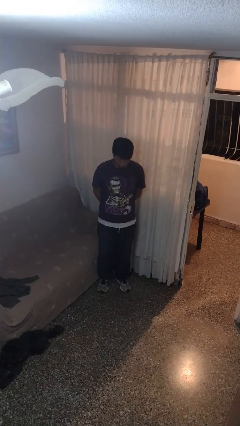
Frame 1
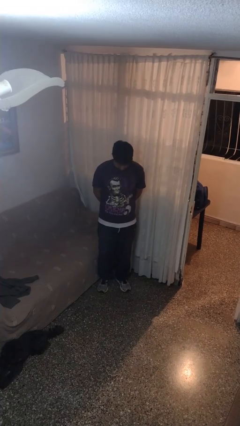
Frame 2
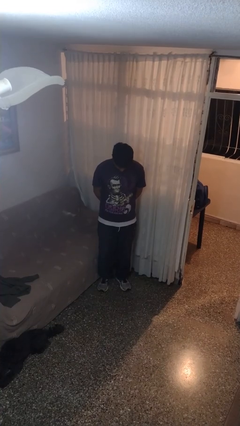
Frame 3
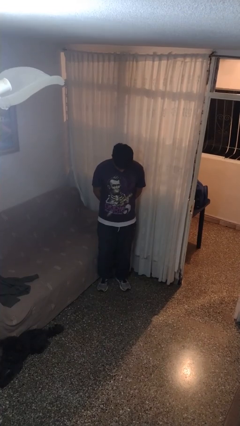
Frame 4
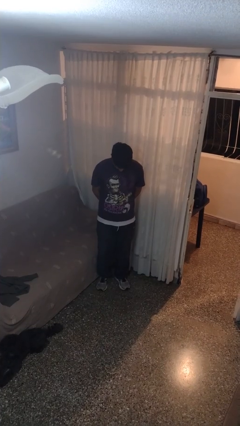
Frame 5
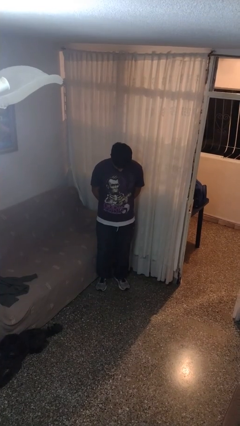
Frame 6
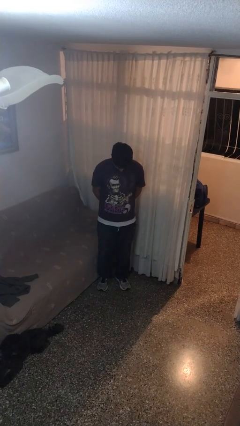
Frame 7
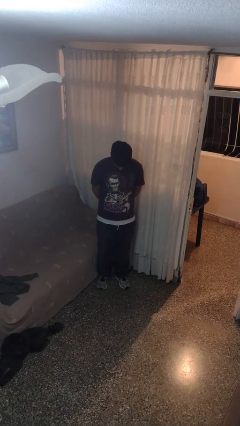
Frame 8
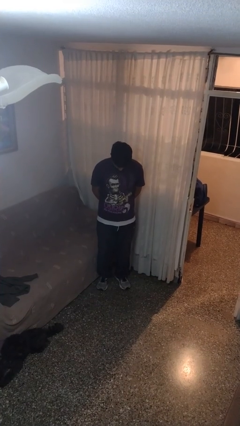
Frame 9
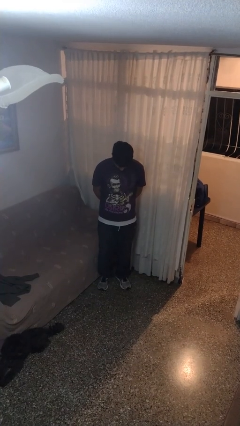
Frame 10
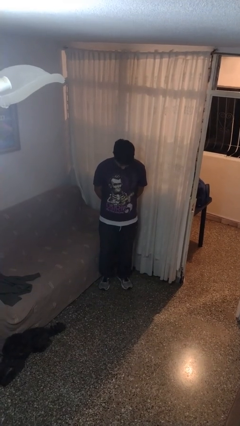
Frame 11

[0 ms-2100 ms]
person prays

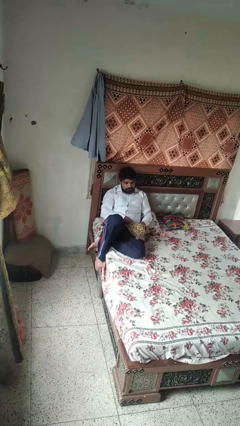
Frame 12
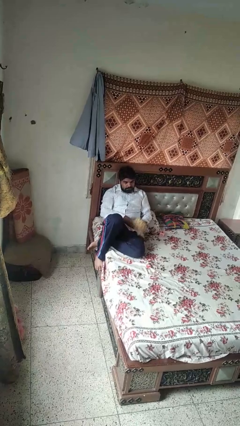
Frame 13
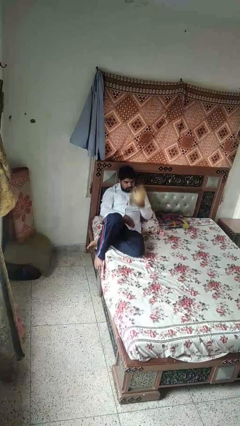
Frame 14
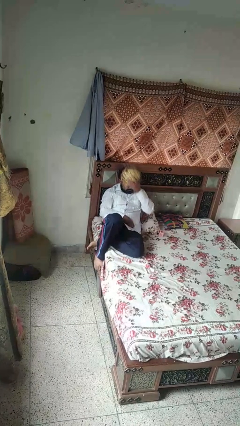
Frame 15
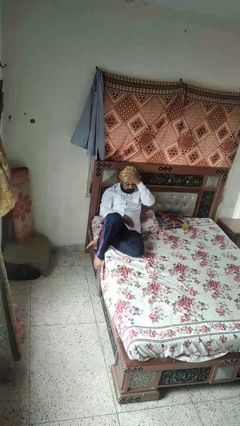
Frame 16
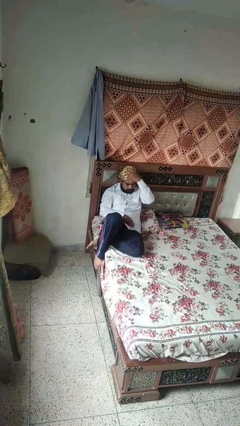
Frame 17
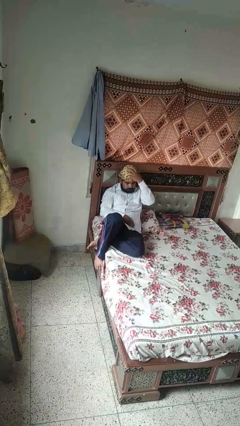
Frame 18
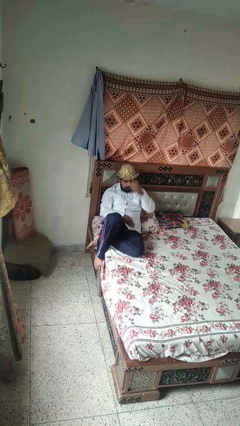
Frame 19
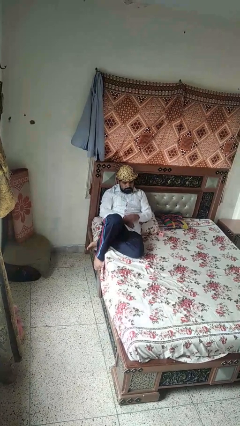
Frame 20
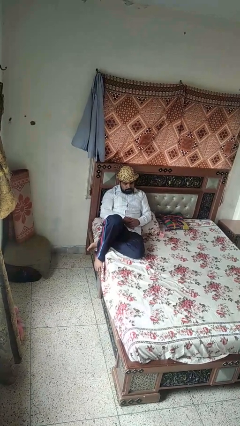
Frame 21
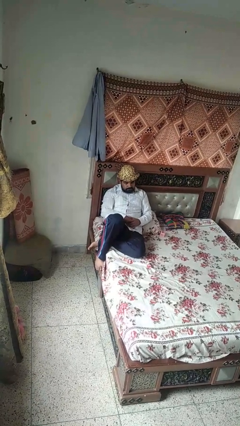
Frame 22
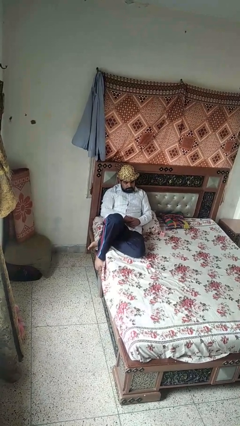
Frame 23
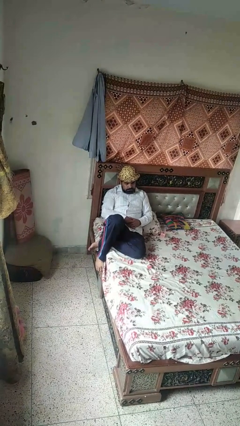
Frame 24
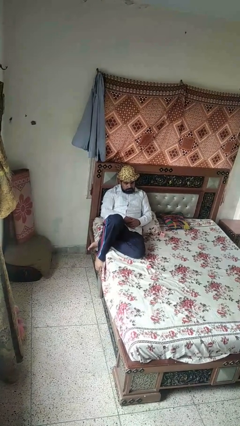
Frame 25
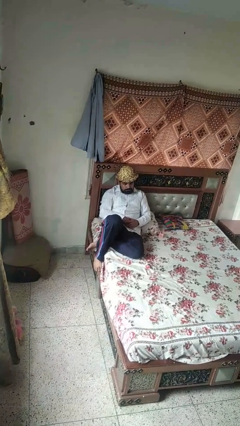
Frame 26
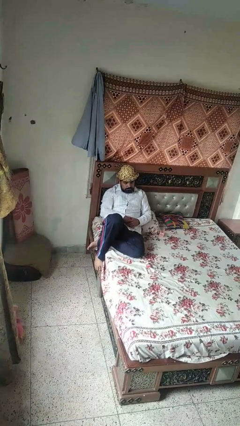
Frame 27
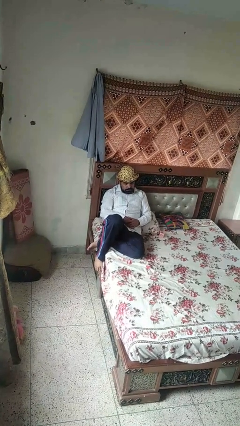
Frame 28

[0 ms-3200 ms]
person puts on hat

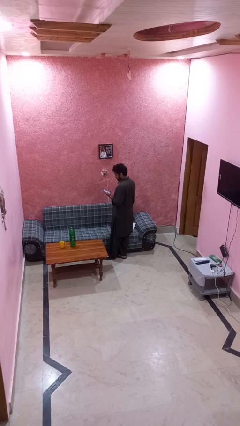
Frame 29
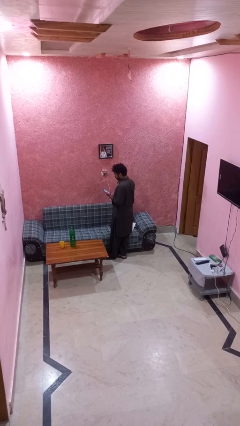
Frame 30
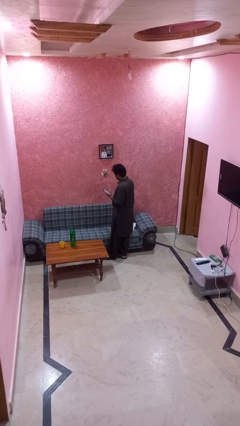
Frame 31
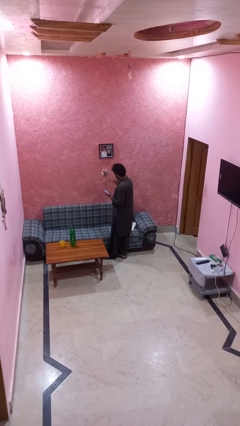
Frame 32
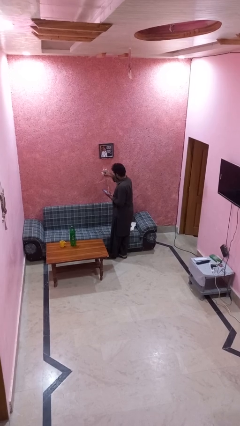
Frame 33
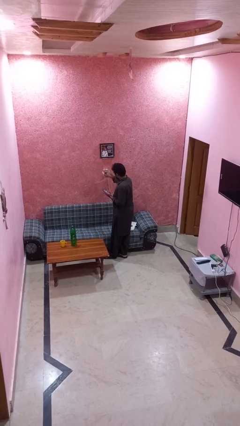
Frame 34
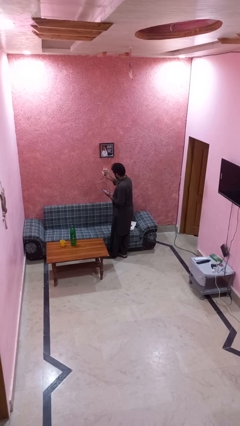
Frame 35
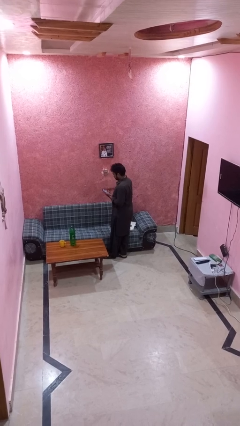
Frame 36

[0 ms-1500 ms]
person unplugs from electrical socket

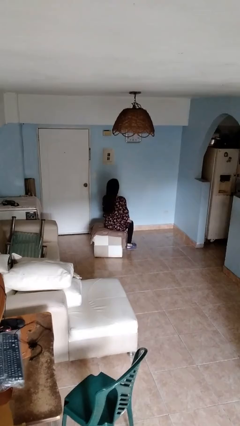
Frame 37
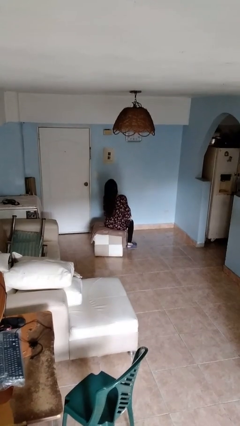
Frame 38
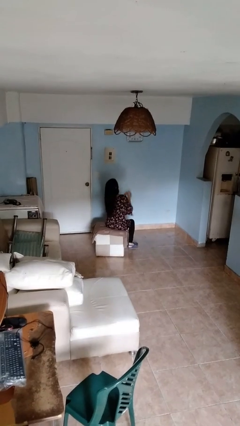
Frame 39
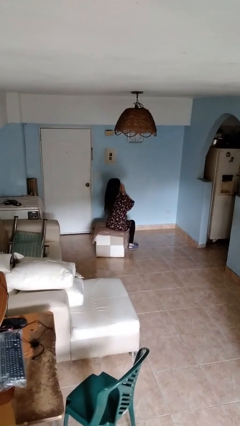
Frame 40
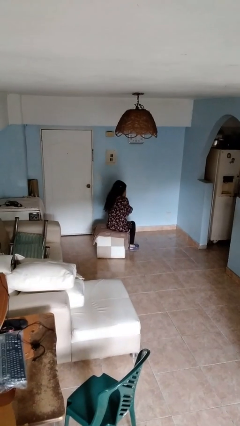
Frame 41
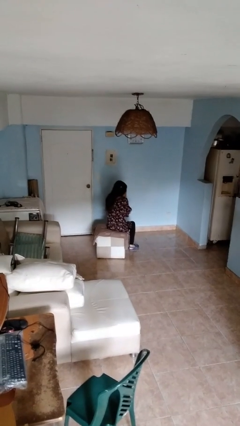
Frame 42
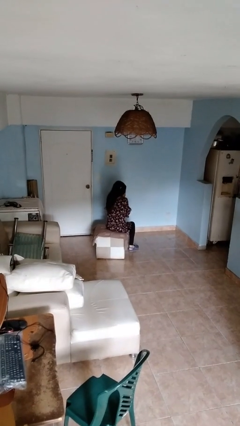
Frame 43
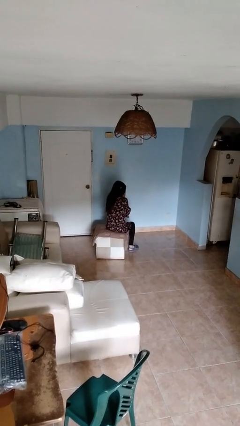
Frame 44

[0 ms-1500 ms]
person sneezes into hand

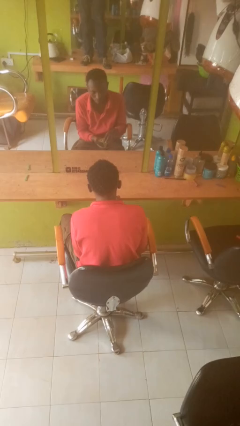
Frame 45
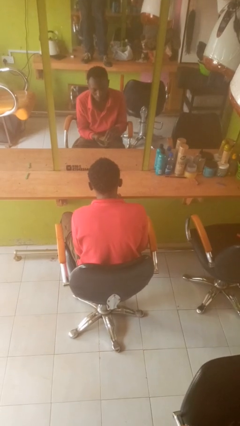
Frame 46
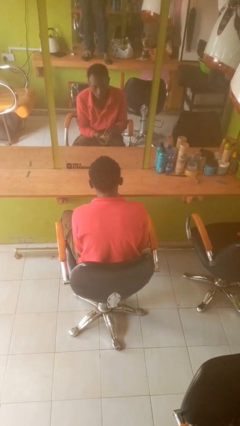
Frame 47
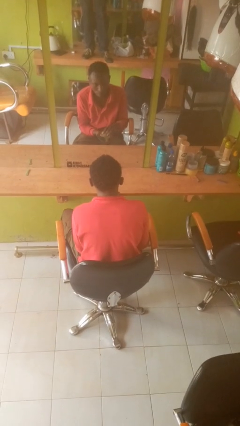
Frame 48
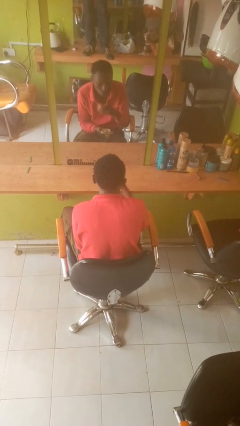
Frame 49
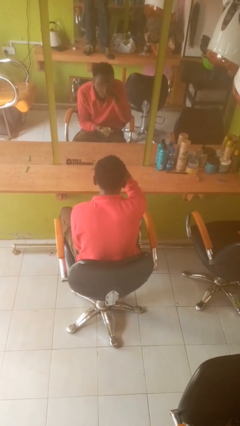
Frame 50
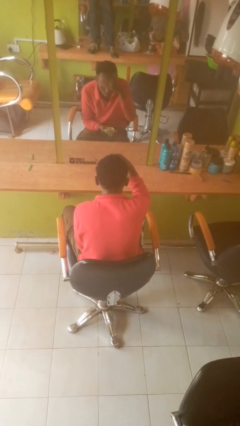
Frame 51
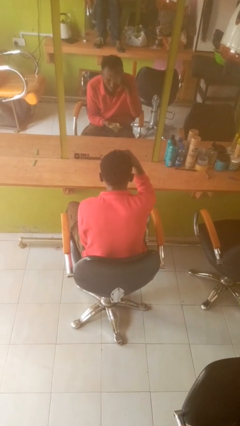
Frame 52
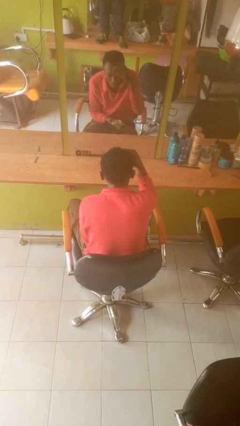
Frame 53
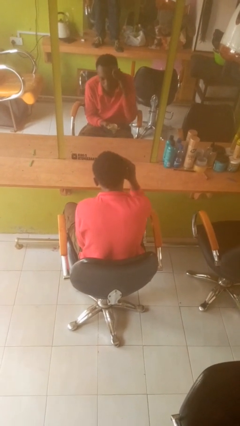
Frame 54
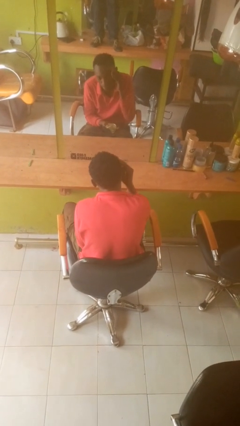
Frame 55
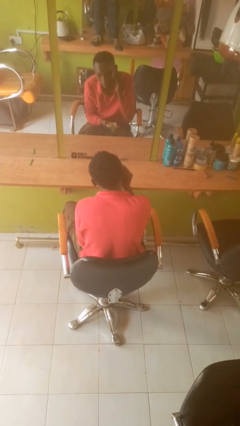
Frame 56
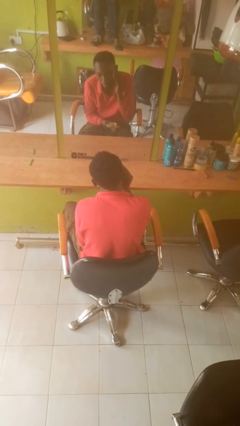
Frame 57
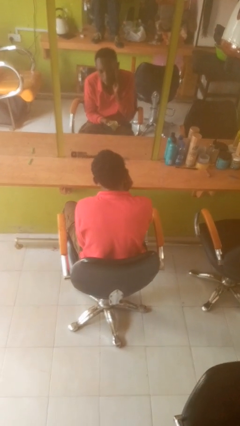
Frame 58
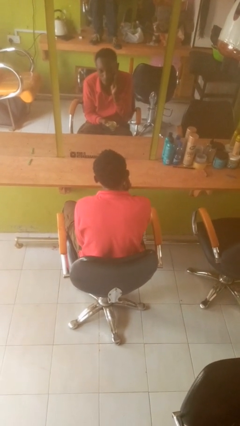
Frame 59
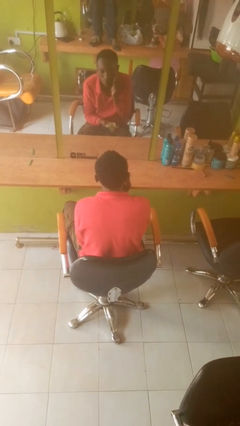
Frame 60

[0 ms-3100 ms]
person applies foundation makeup

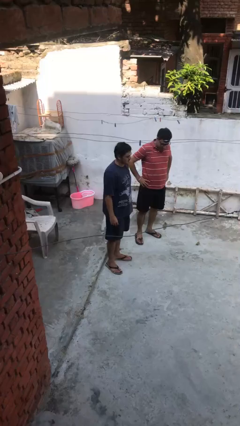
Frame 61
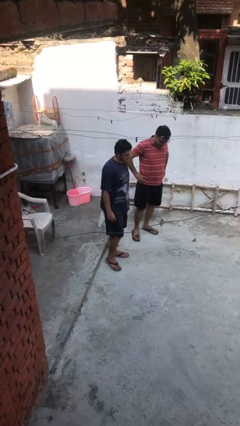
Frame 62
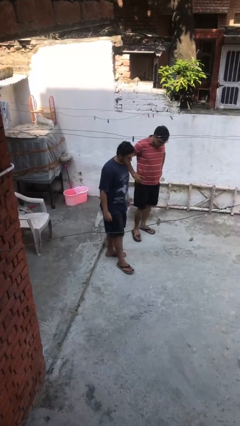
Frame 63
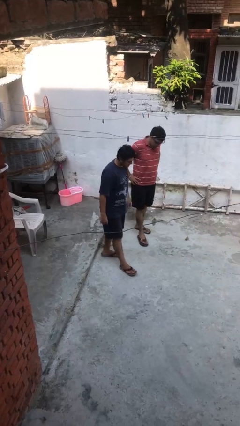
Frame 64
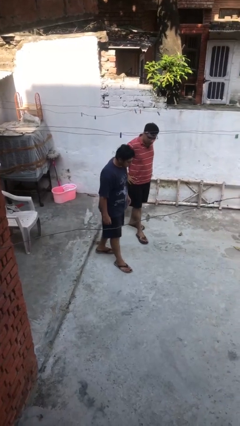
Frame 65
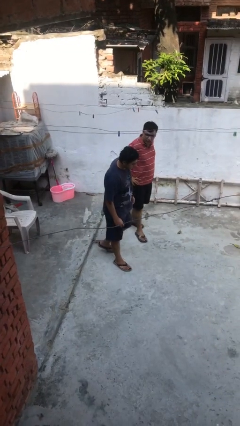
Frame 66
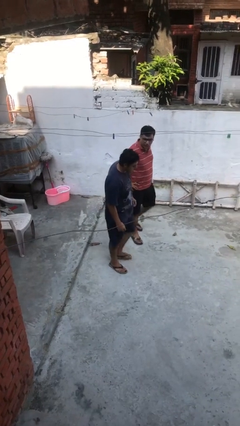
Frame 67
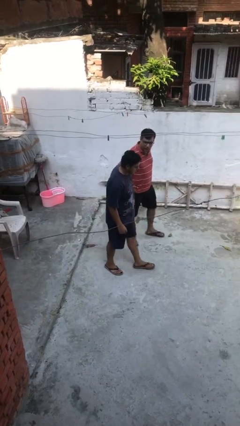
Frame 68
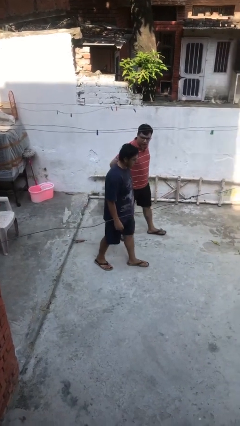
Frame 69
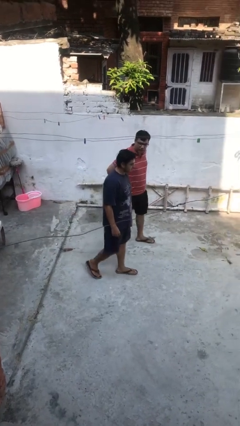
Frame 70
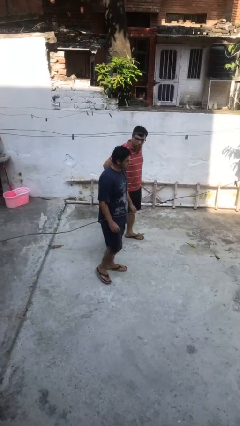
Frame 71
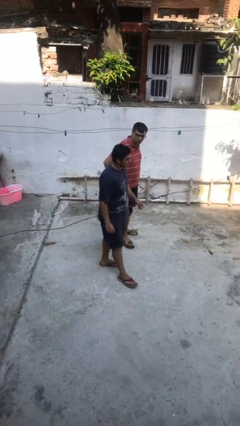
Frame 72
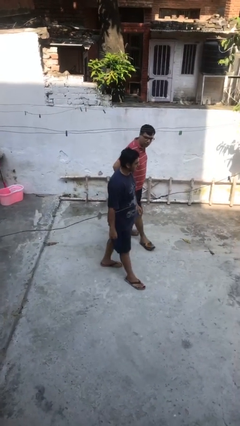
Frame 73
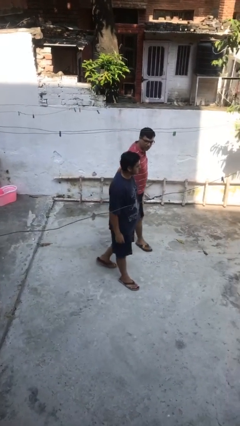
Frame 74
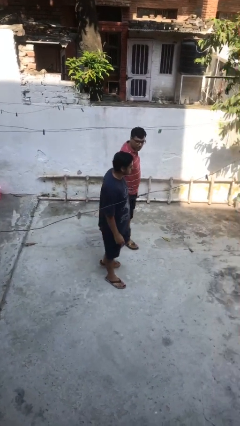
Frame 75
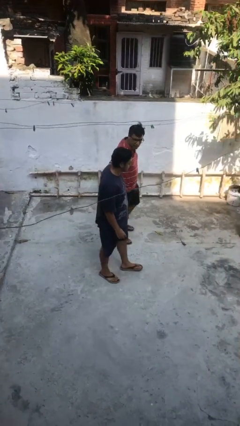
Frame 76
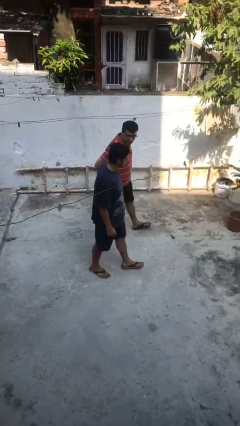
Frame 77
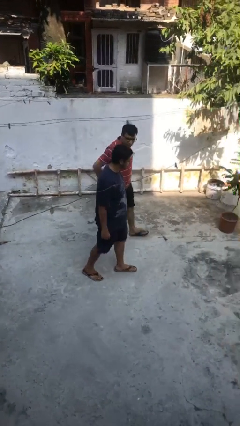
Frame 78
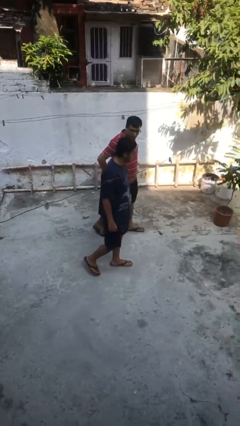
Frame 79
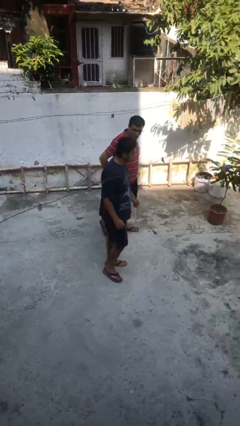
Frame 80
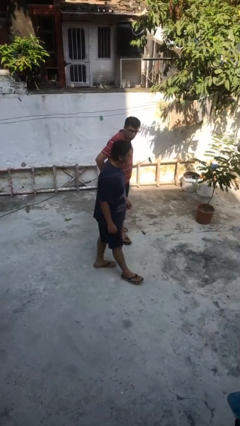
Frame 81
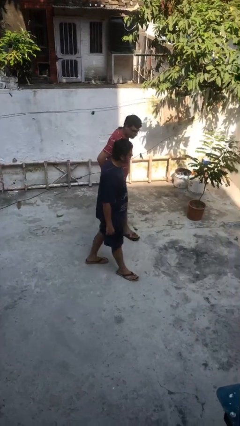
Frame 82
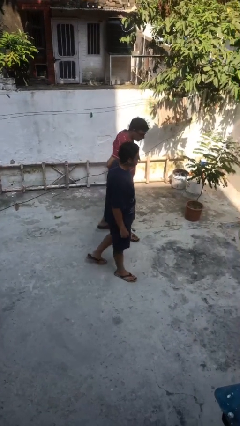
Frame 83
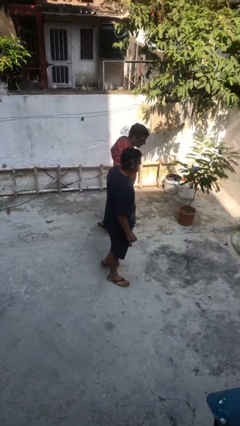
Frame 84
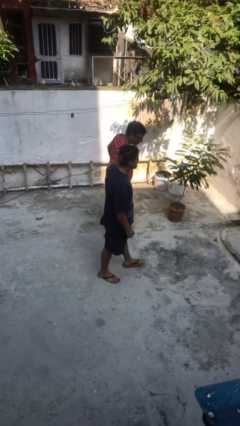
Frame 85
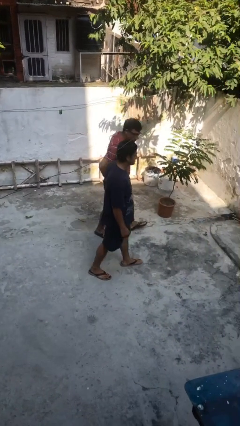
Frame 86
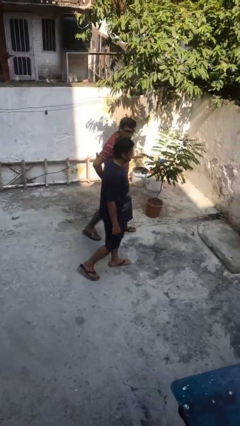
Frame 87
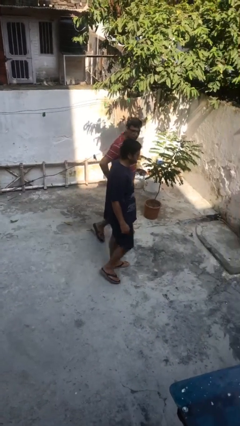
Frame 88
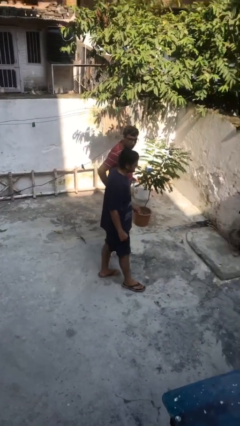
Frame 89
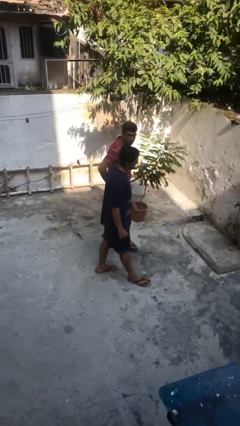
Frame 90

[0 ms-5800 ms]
person talks to person

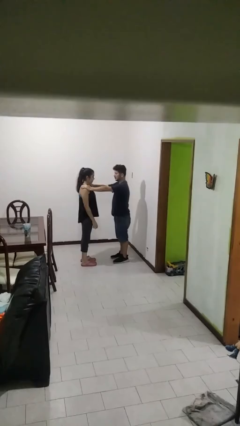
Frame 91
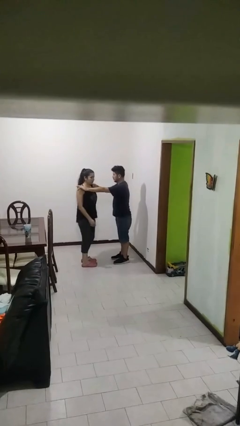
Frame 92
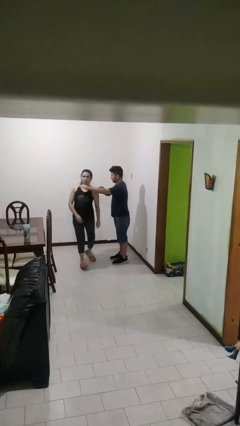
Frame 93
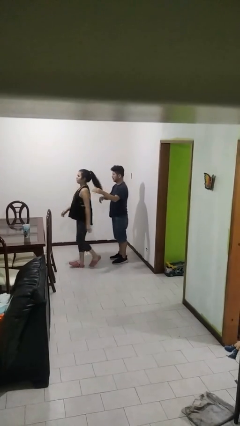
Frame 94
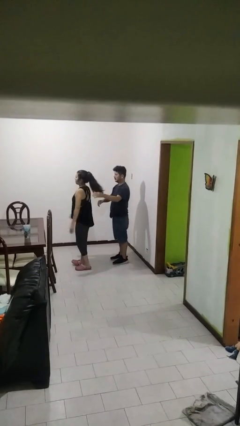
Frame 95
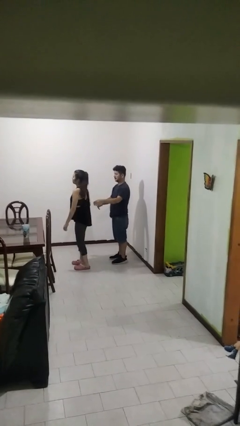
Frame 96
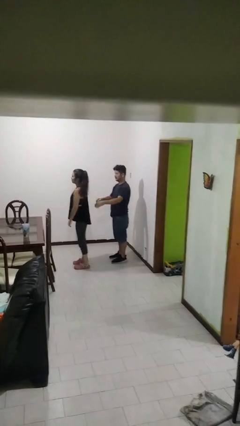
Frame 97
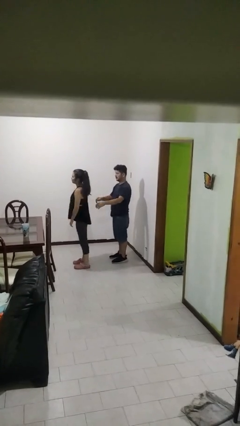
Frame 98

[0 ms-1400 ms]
person spins person around
